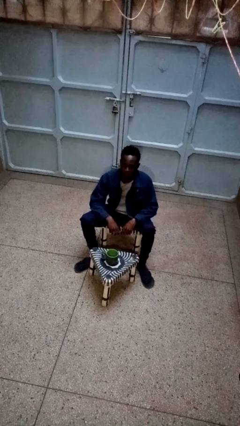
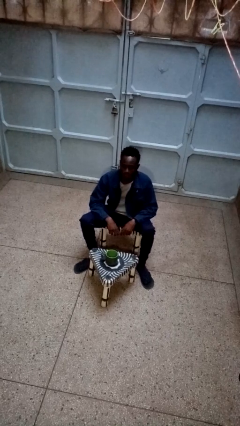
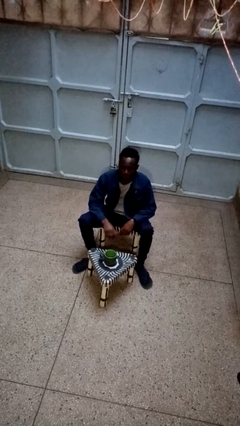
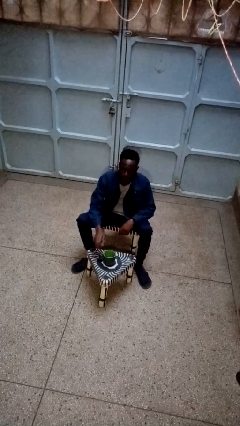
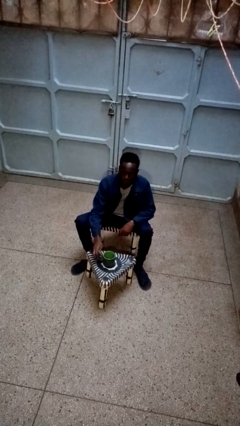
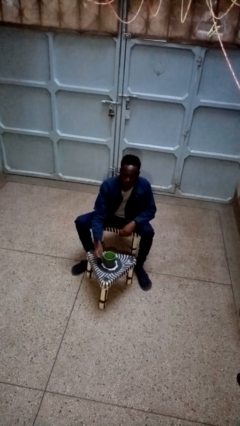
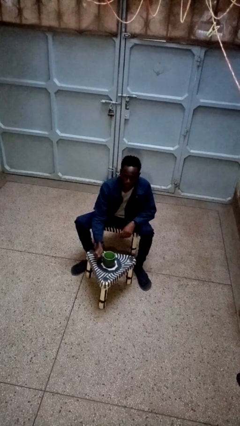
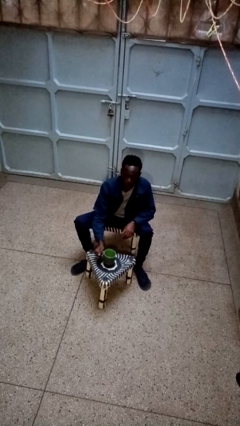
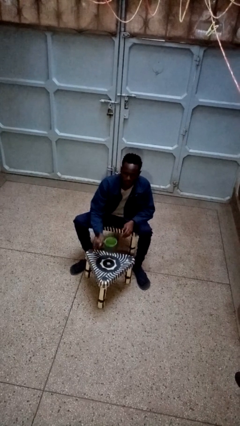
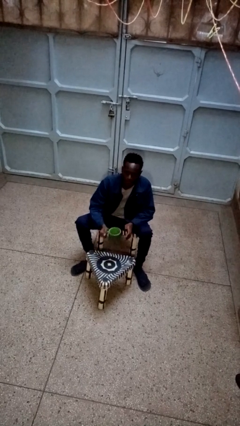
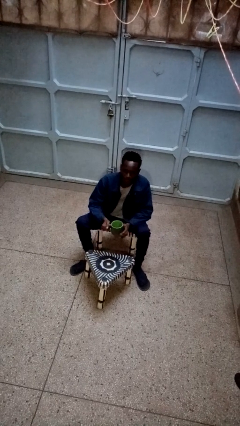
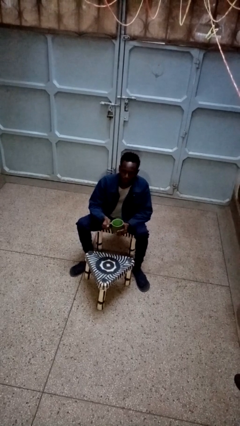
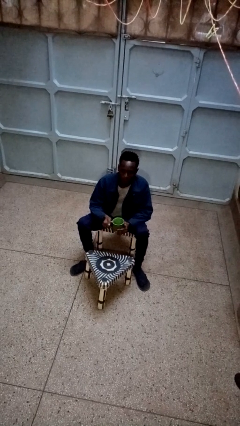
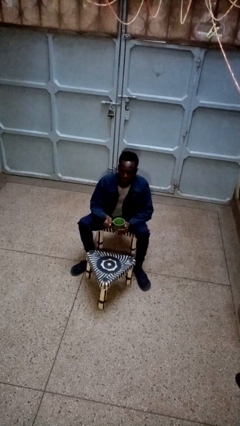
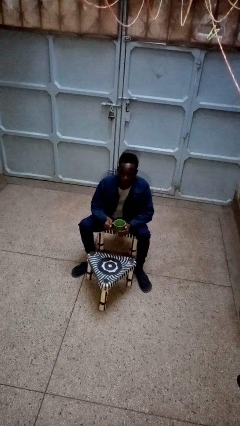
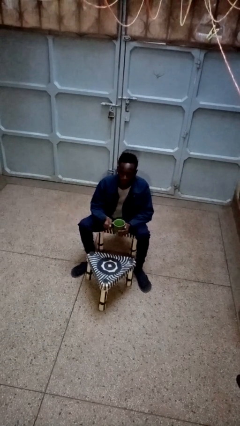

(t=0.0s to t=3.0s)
person picks up object from table

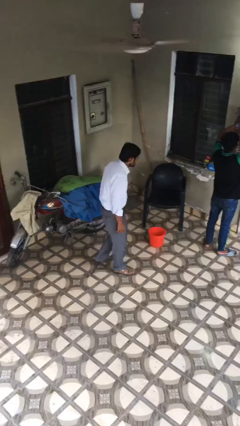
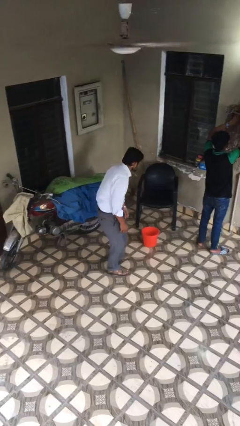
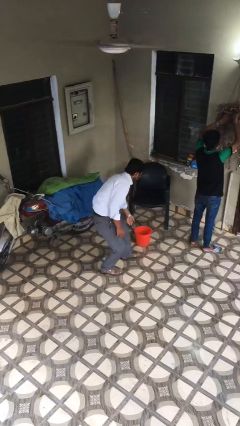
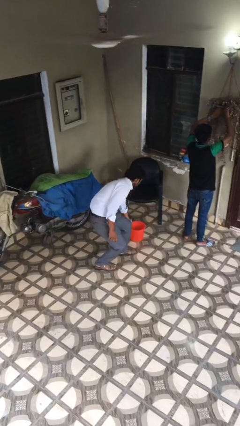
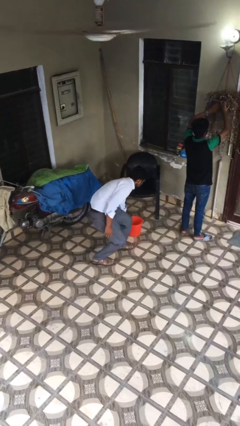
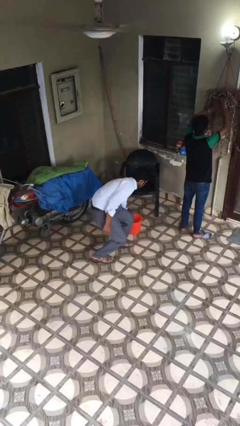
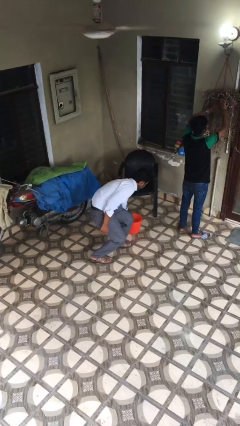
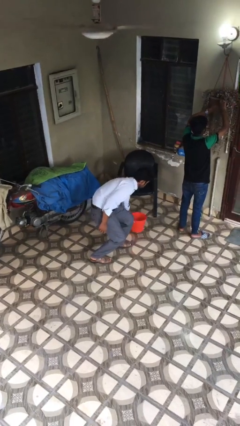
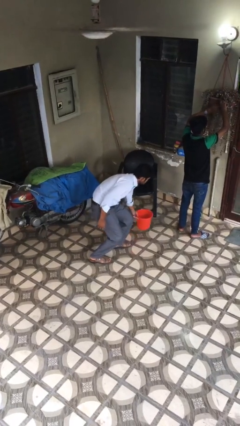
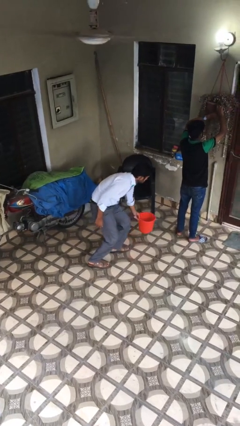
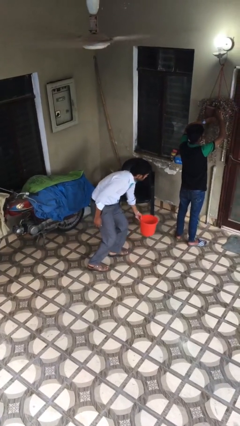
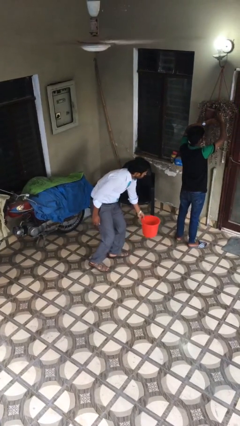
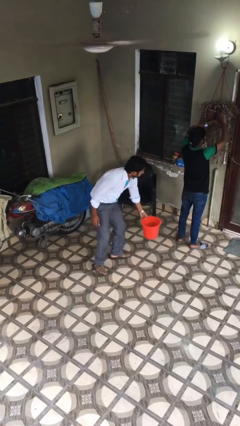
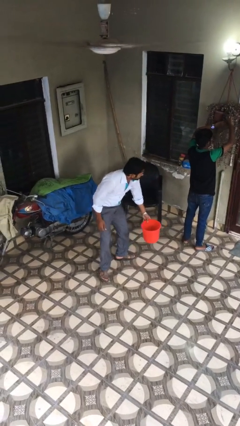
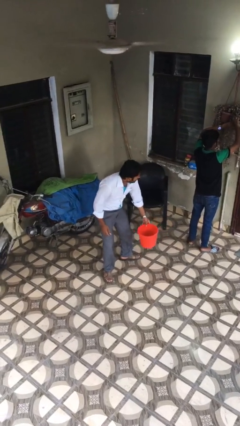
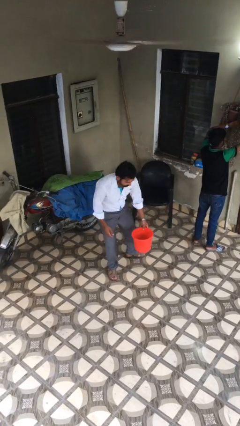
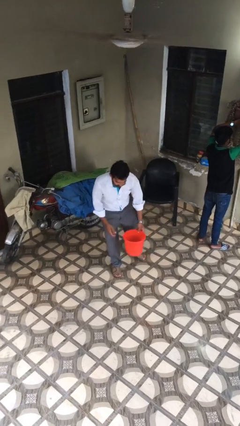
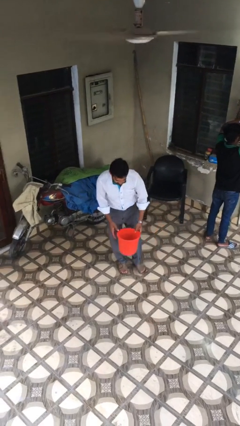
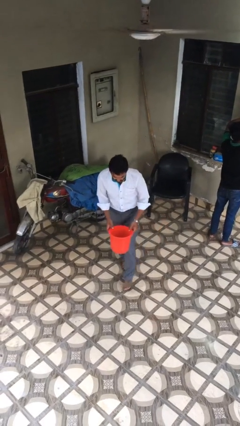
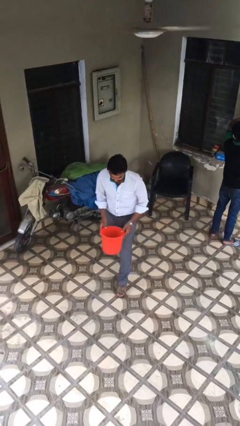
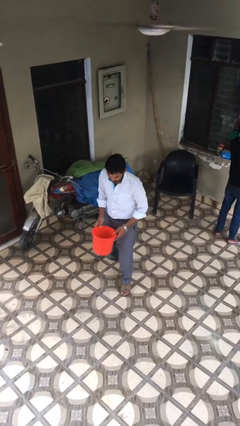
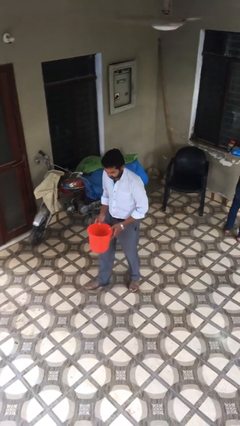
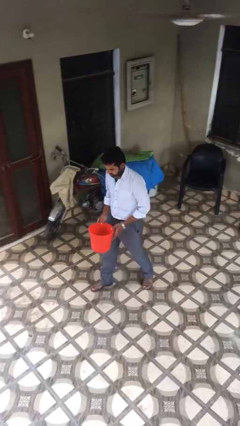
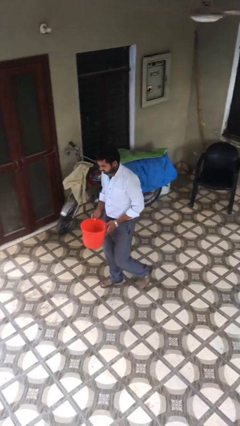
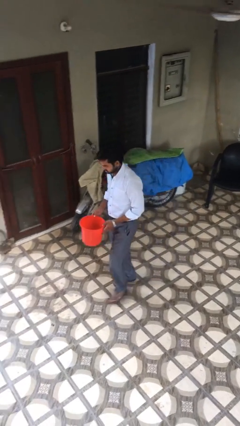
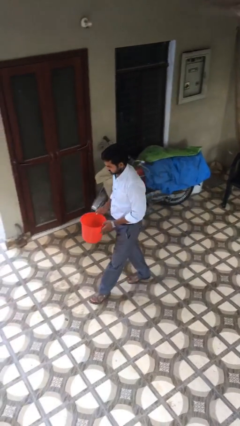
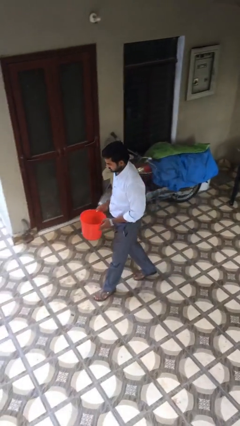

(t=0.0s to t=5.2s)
person steals object from person

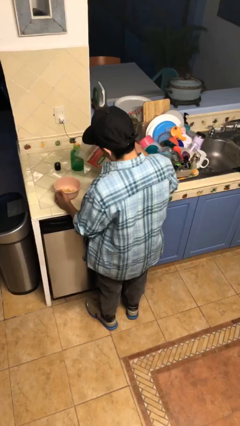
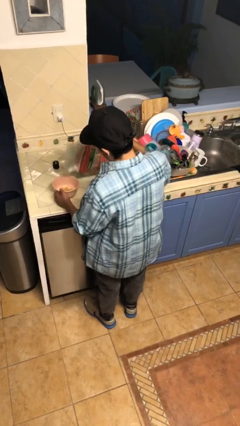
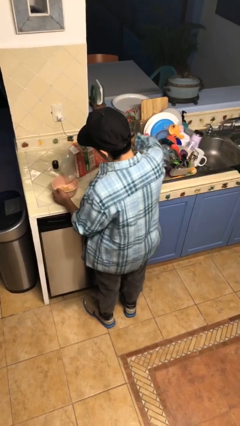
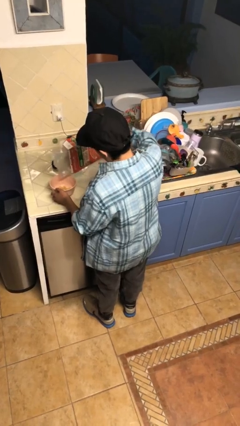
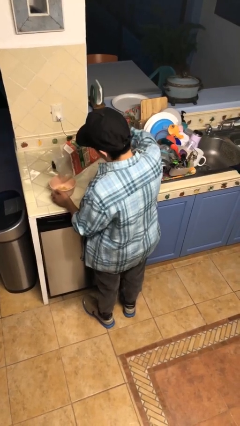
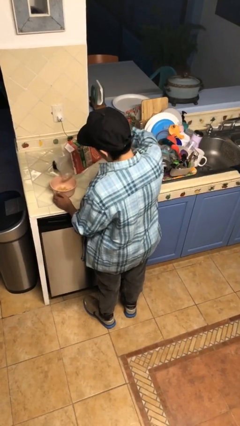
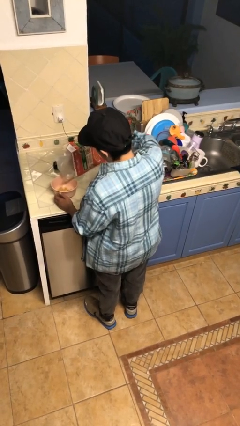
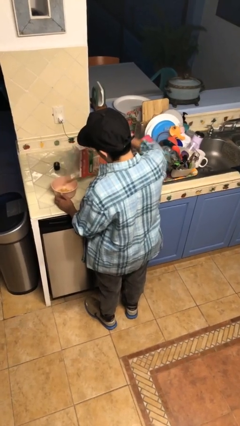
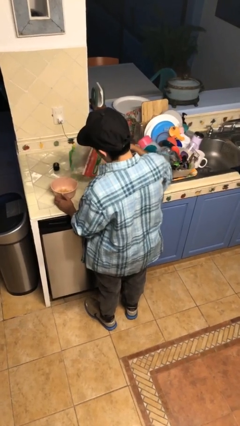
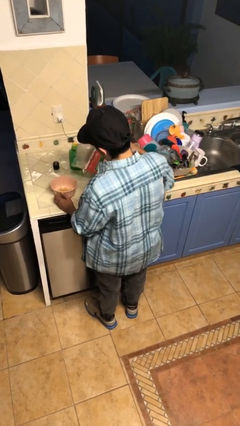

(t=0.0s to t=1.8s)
person pours into bowl

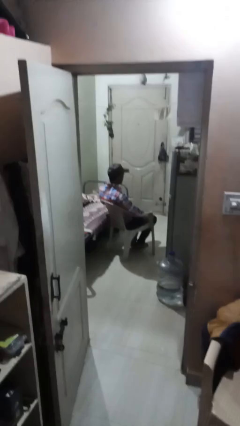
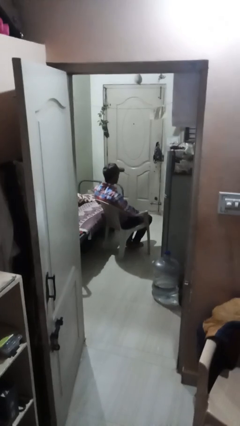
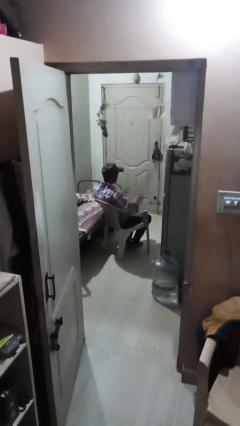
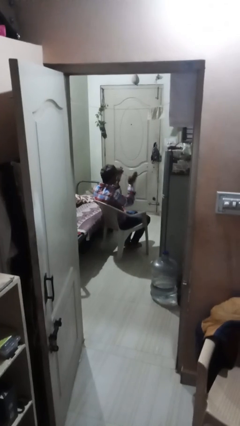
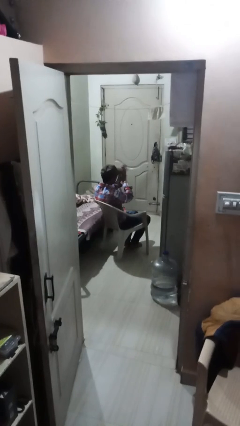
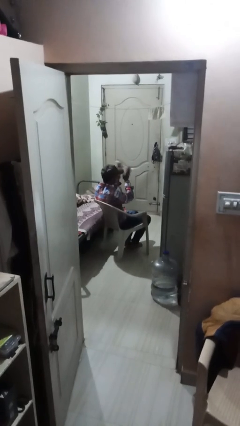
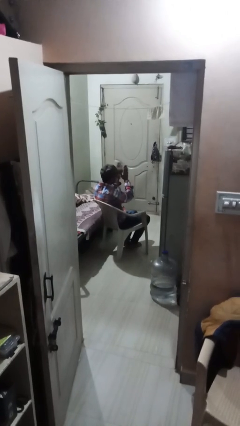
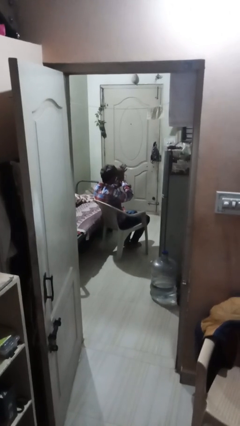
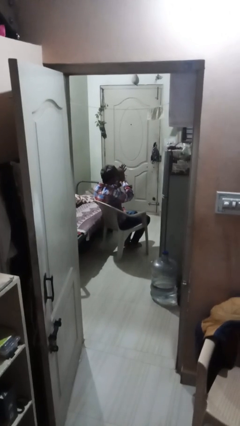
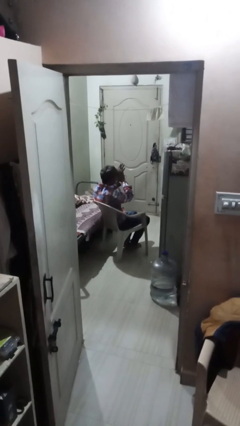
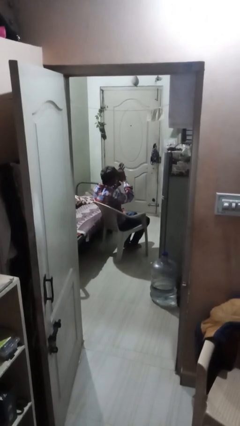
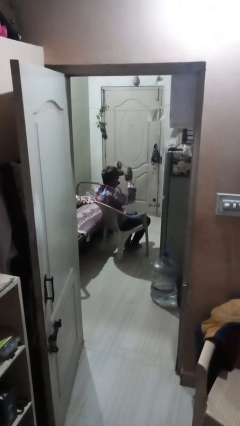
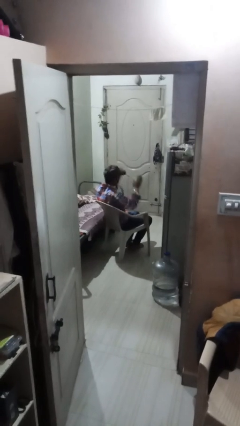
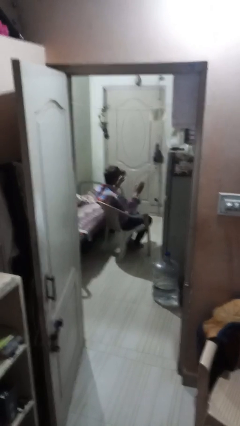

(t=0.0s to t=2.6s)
person claps hands

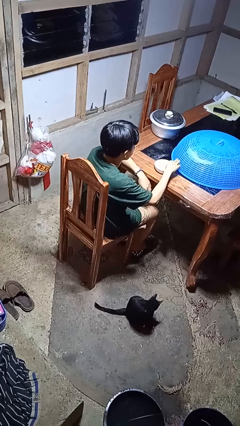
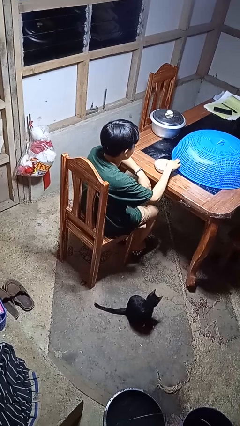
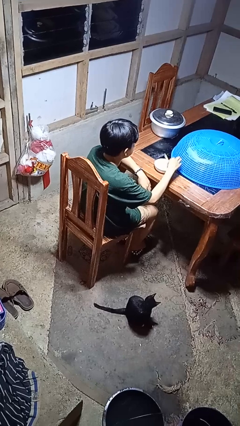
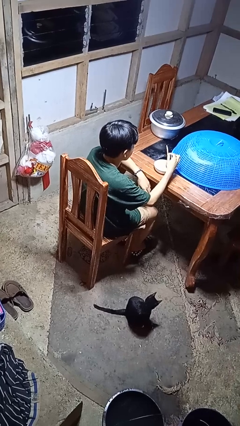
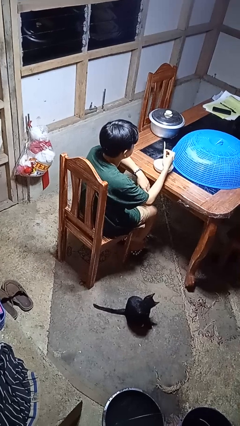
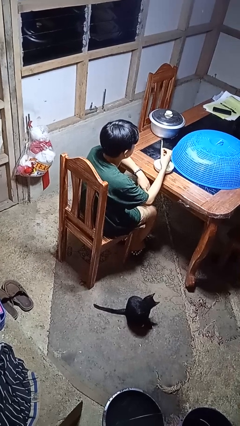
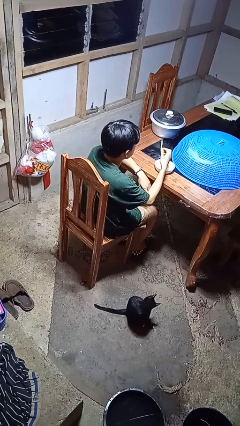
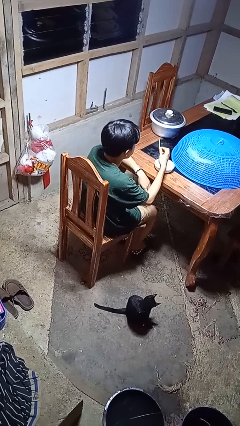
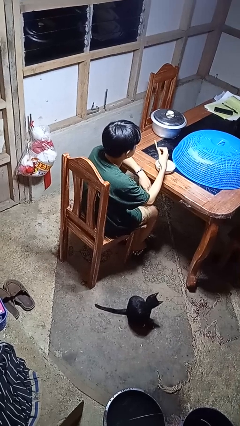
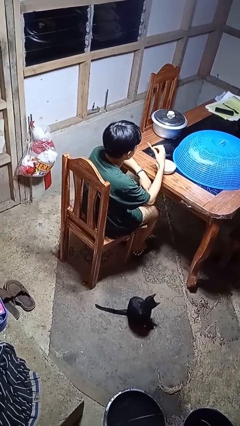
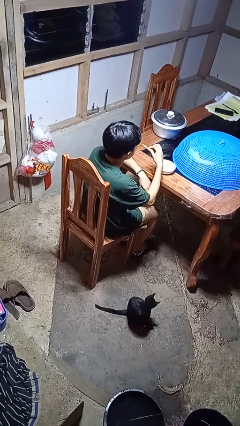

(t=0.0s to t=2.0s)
person eats with hands

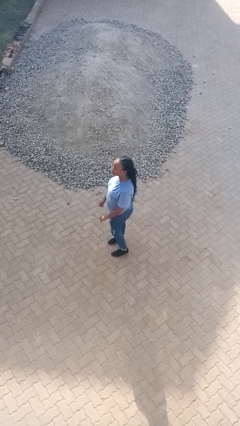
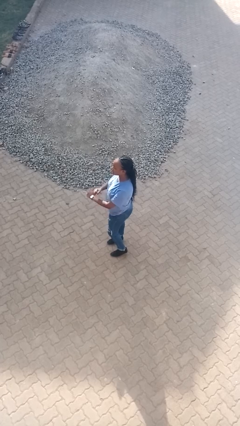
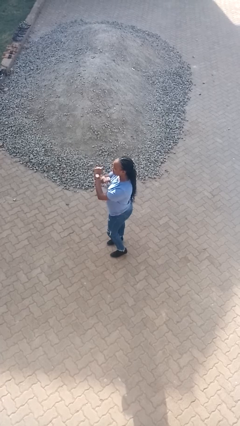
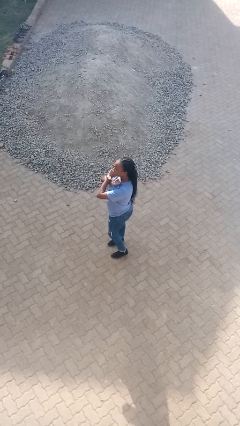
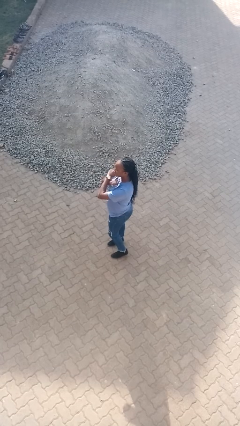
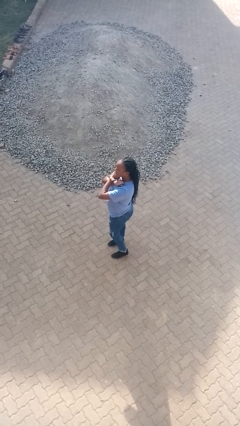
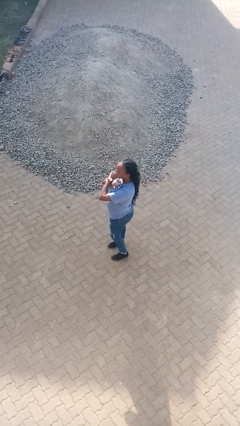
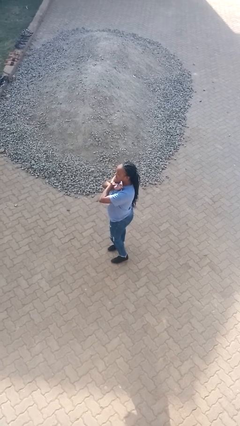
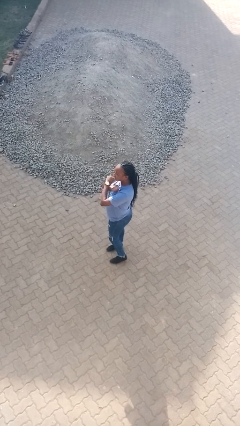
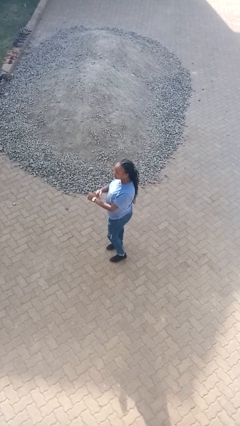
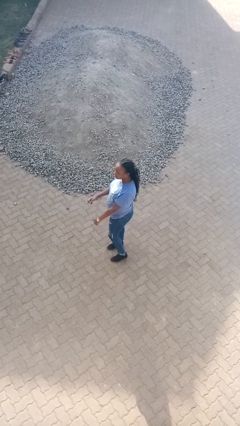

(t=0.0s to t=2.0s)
person gestures arms x

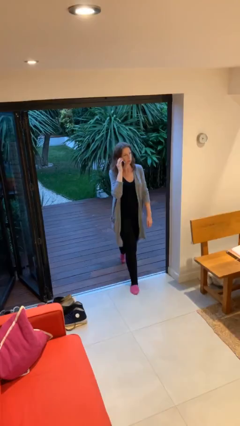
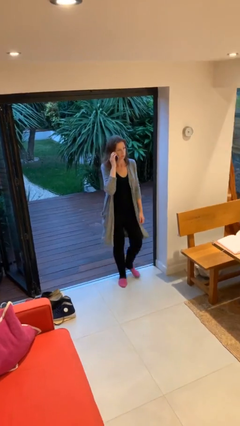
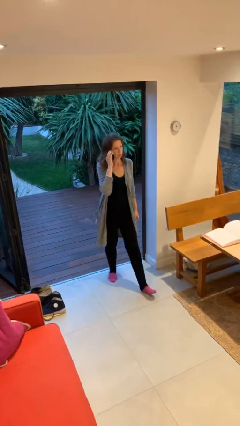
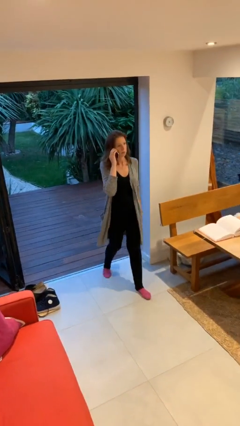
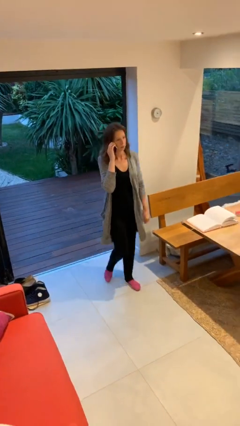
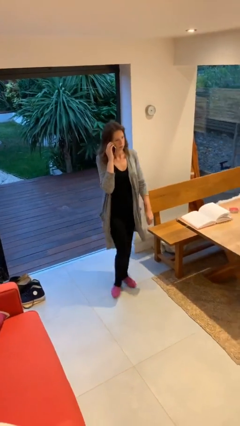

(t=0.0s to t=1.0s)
person enters scene through structure
